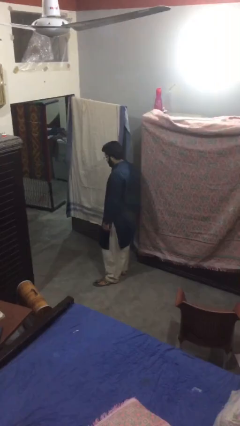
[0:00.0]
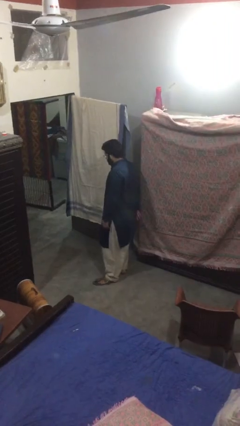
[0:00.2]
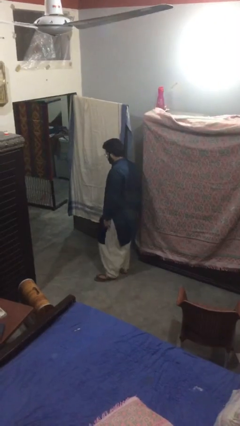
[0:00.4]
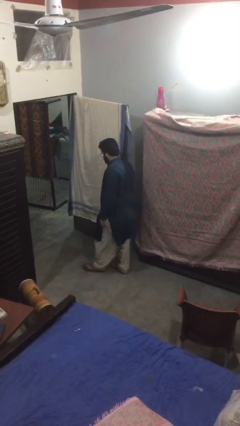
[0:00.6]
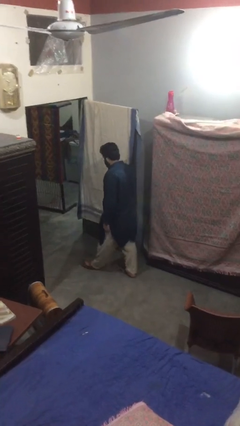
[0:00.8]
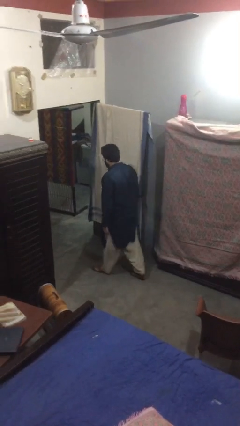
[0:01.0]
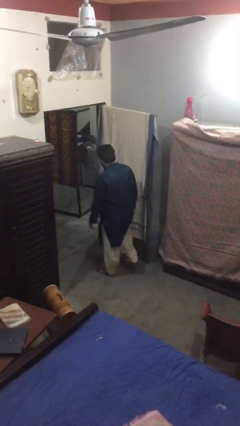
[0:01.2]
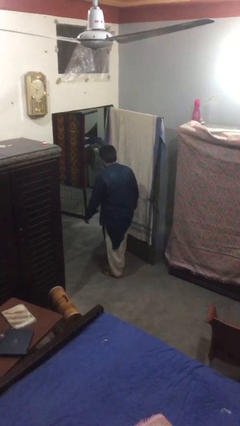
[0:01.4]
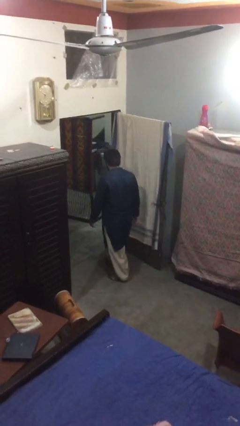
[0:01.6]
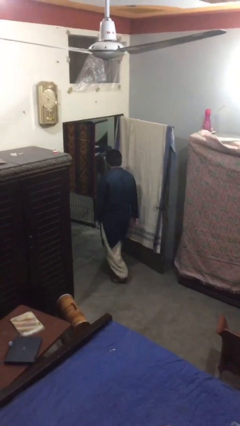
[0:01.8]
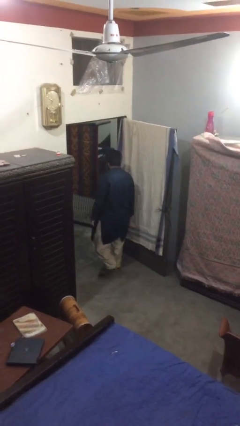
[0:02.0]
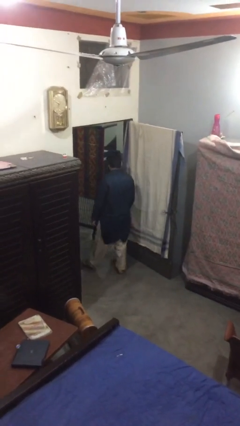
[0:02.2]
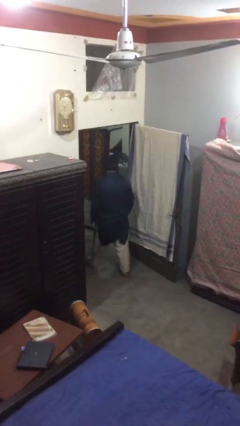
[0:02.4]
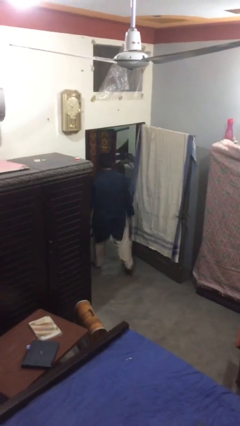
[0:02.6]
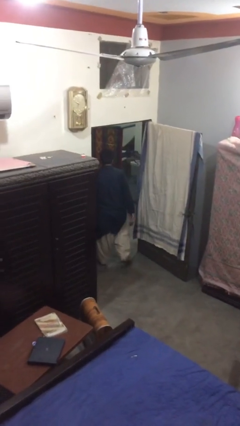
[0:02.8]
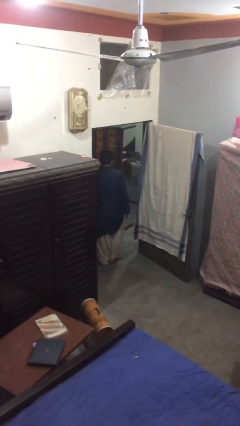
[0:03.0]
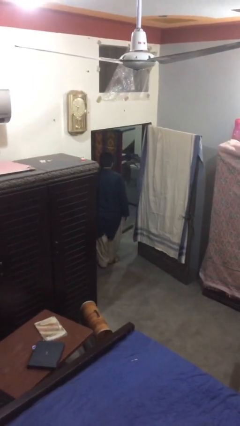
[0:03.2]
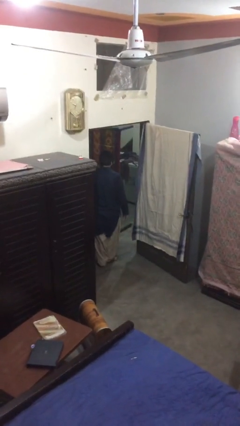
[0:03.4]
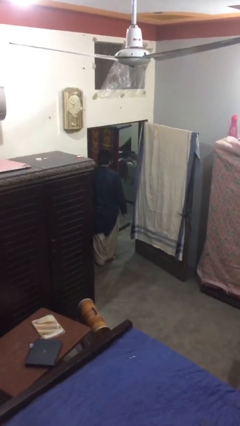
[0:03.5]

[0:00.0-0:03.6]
person exits scene through structure

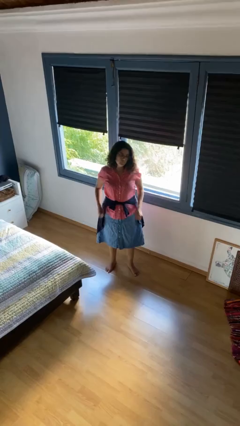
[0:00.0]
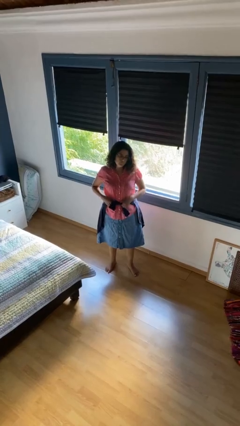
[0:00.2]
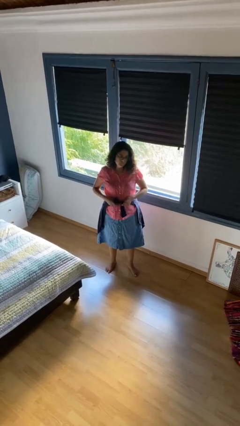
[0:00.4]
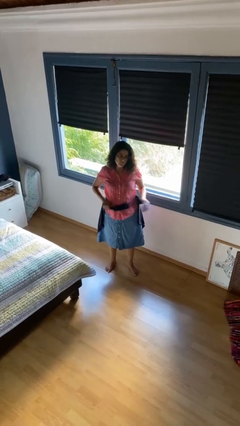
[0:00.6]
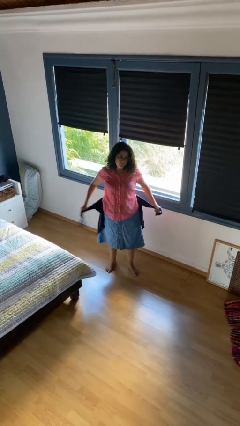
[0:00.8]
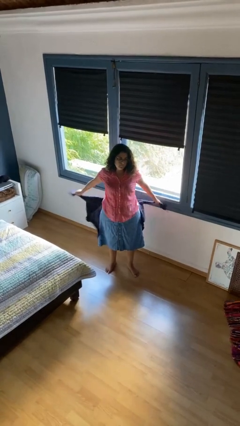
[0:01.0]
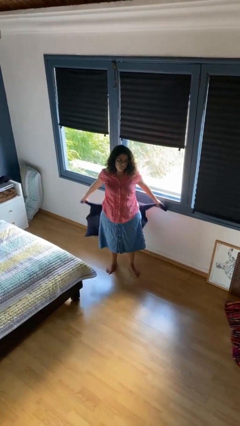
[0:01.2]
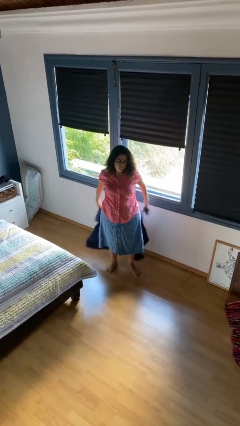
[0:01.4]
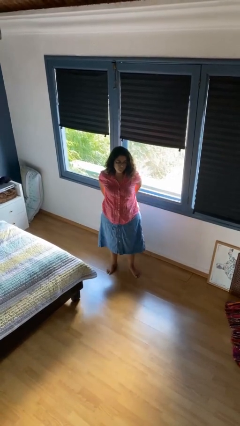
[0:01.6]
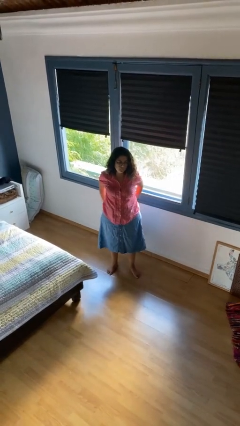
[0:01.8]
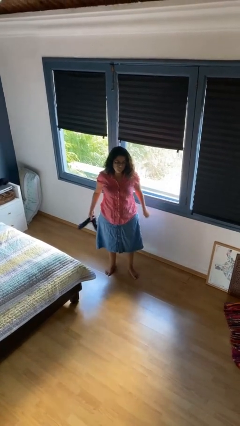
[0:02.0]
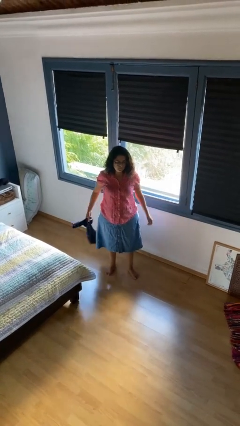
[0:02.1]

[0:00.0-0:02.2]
person unties jacket around waist

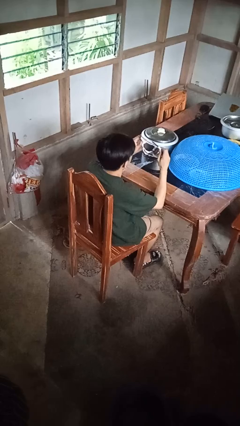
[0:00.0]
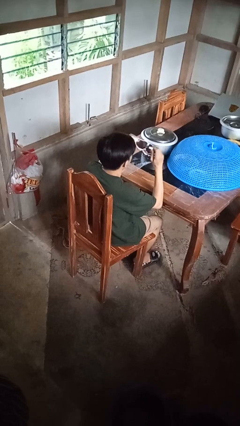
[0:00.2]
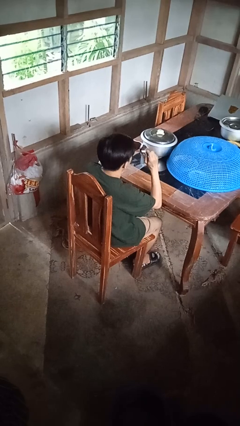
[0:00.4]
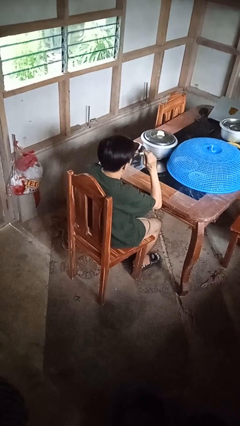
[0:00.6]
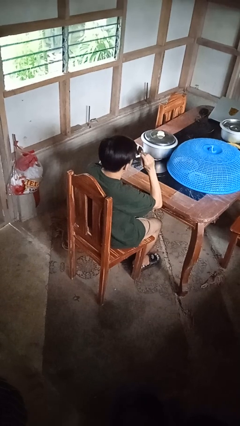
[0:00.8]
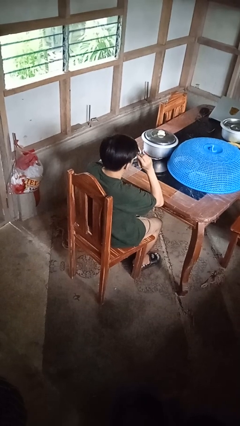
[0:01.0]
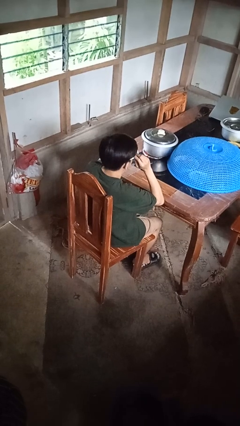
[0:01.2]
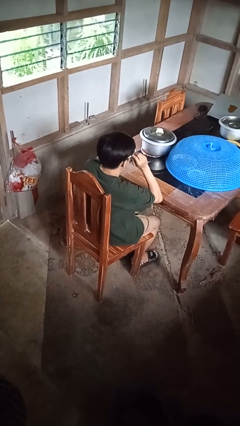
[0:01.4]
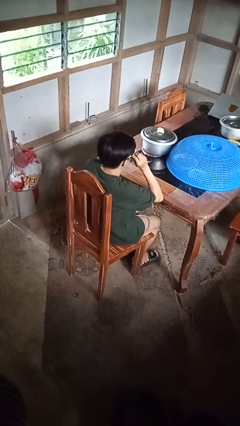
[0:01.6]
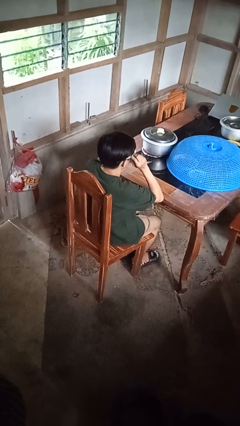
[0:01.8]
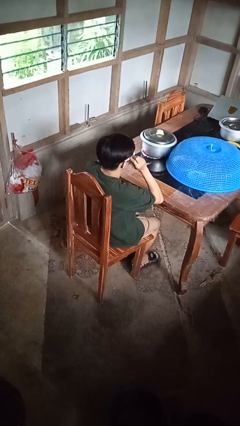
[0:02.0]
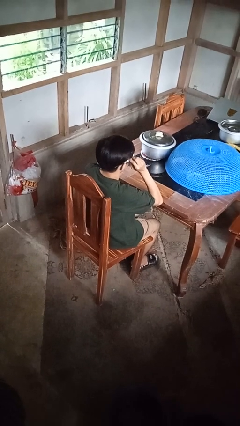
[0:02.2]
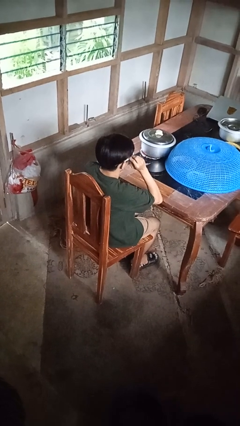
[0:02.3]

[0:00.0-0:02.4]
person puts on sunglasses

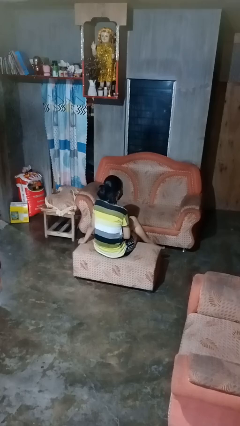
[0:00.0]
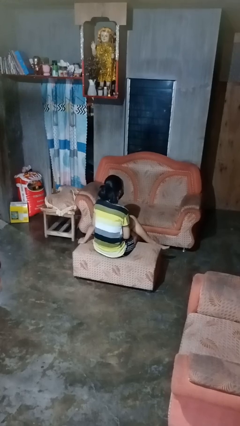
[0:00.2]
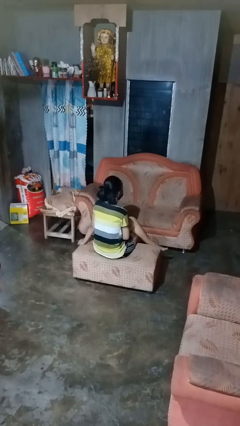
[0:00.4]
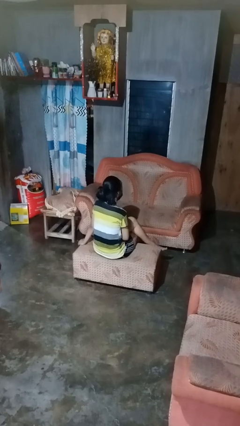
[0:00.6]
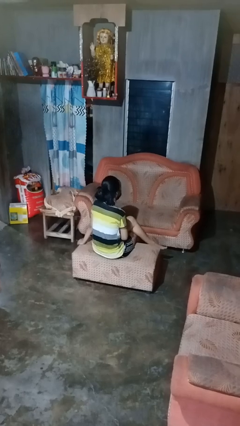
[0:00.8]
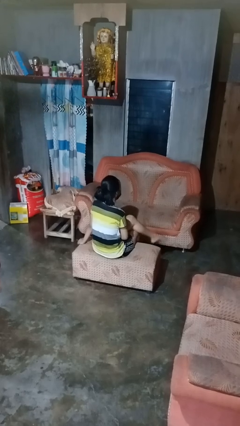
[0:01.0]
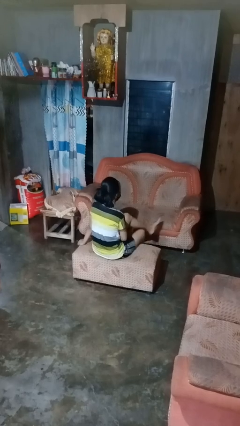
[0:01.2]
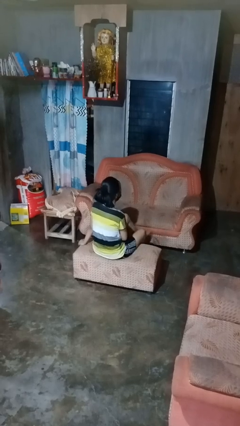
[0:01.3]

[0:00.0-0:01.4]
person crosses legs

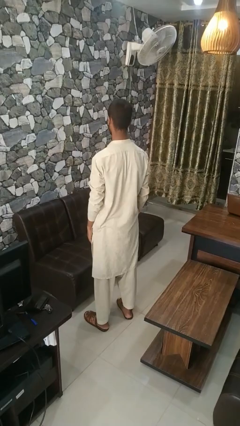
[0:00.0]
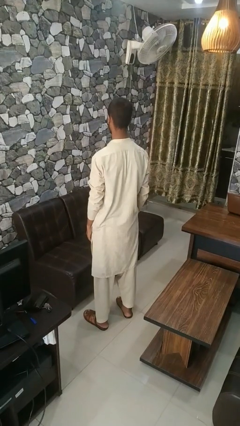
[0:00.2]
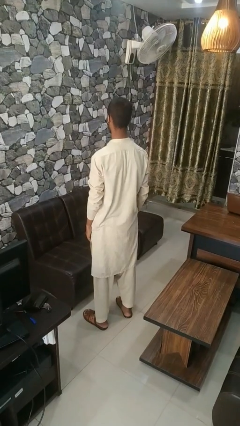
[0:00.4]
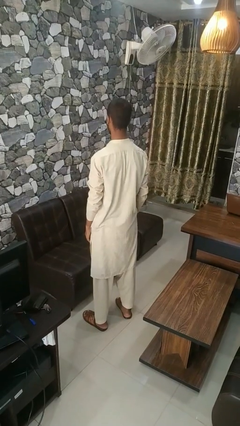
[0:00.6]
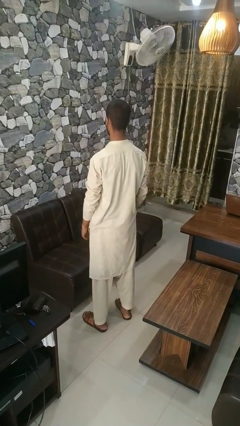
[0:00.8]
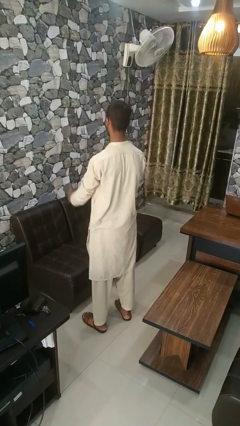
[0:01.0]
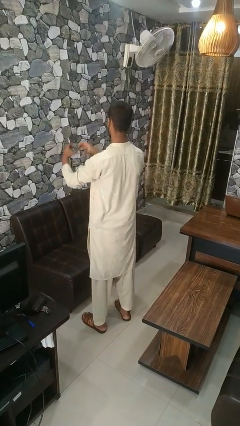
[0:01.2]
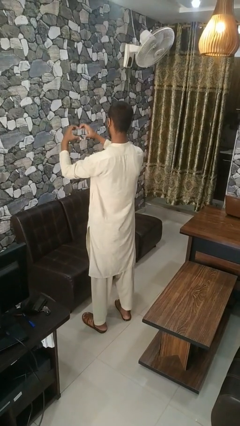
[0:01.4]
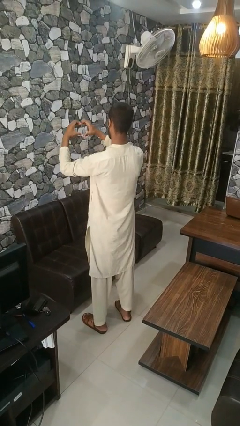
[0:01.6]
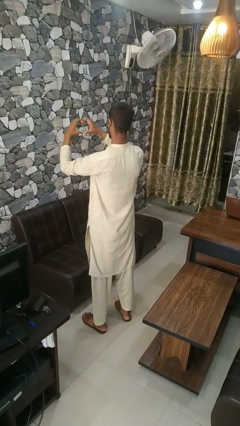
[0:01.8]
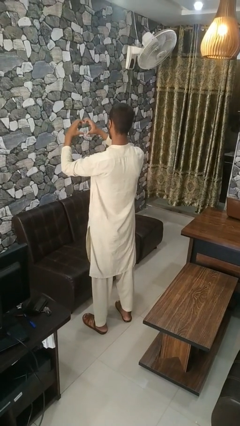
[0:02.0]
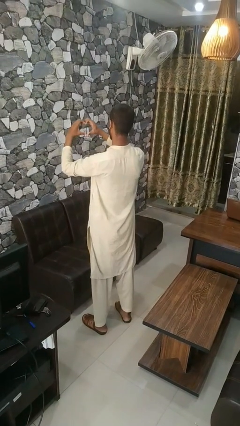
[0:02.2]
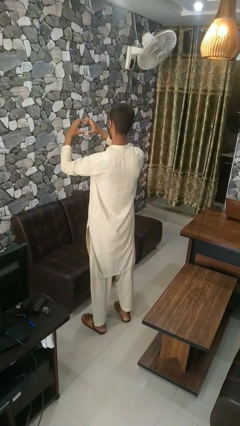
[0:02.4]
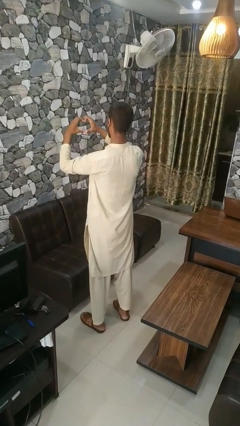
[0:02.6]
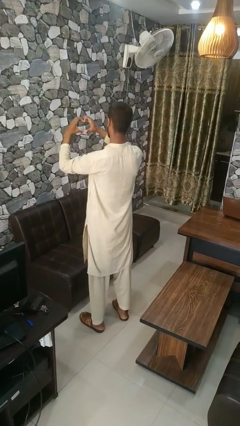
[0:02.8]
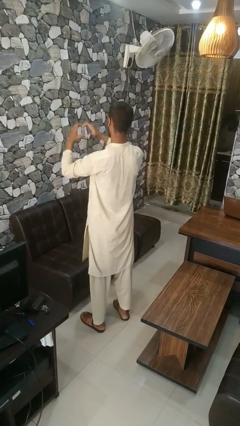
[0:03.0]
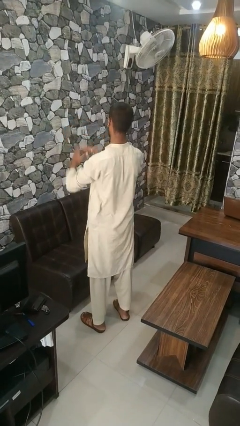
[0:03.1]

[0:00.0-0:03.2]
person gestures heart

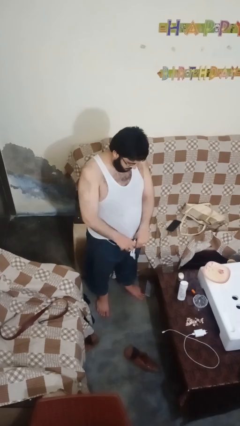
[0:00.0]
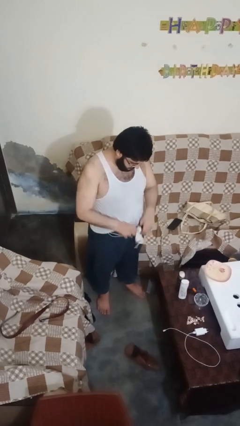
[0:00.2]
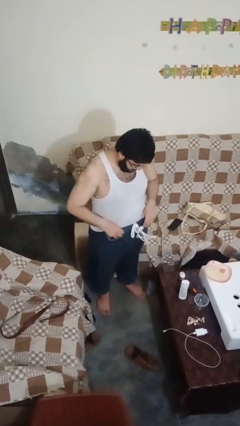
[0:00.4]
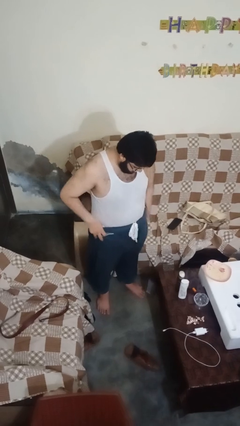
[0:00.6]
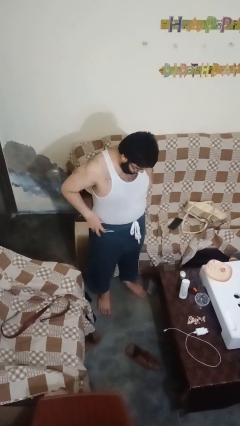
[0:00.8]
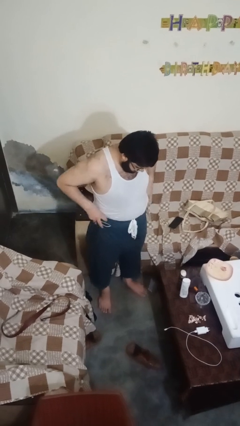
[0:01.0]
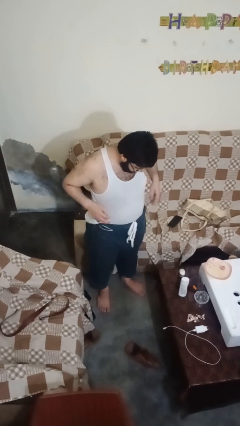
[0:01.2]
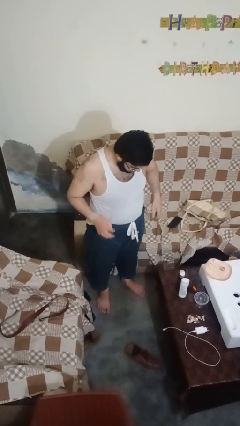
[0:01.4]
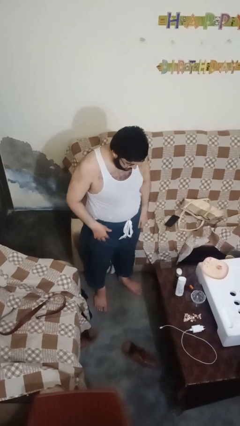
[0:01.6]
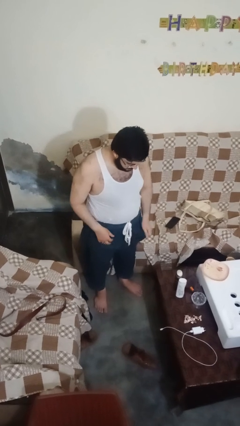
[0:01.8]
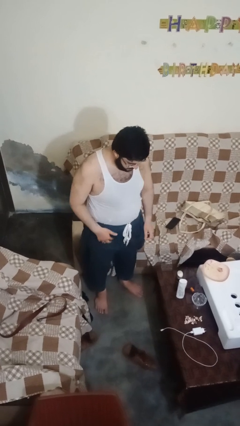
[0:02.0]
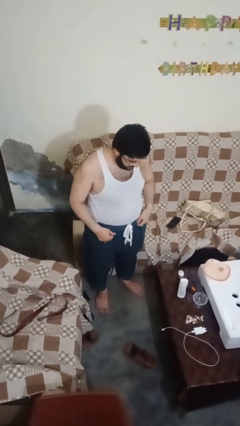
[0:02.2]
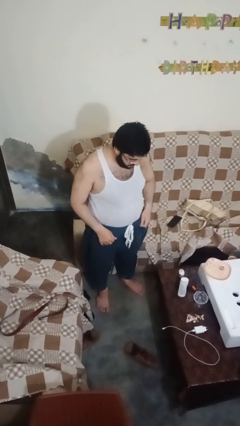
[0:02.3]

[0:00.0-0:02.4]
person hikes up pants

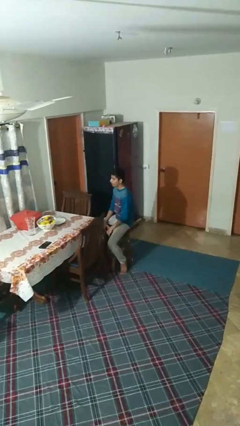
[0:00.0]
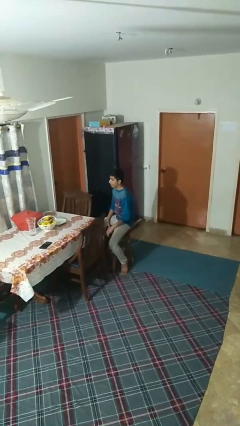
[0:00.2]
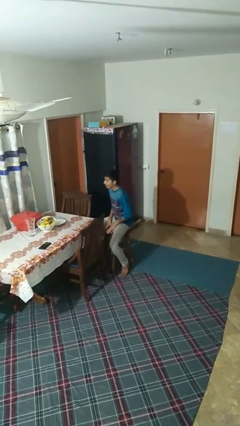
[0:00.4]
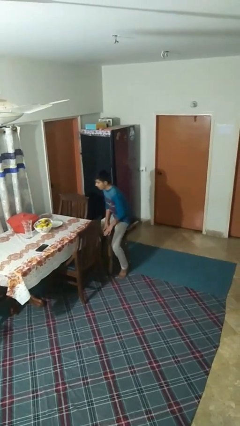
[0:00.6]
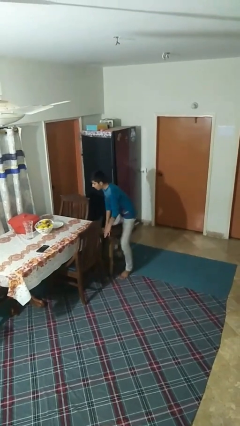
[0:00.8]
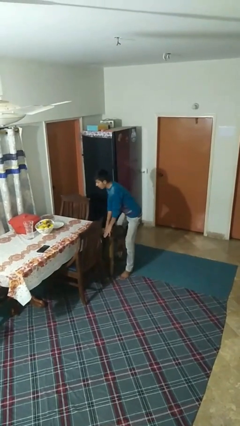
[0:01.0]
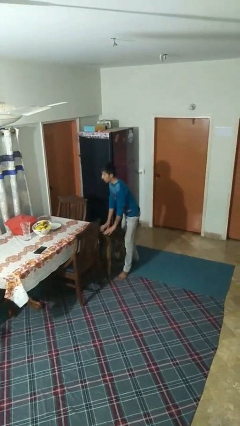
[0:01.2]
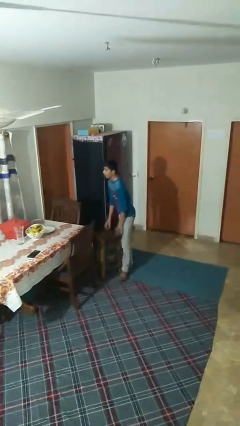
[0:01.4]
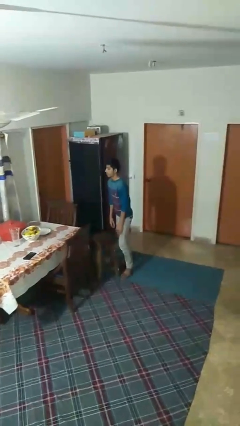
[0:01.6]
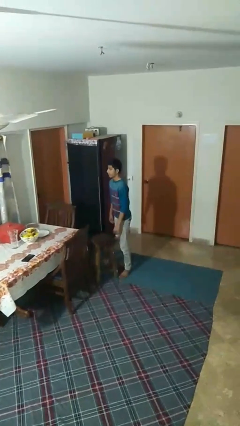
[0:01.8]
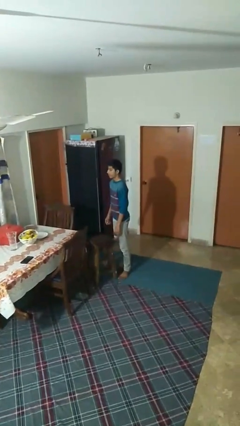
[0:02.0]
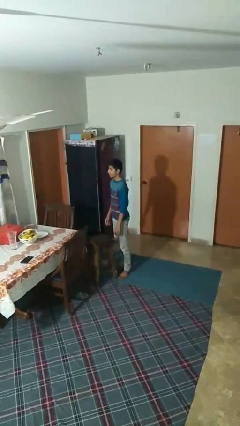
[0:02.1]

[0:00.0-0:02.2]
person stands up
